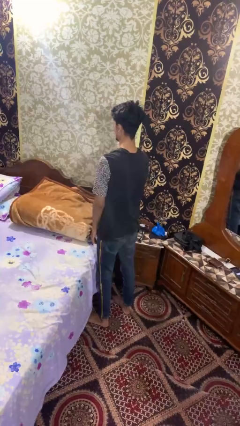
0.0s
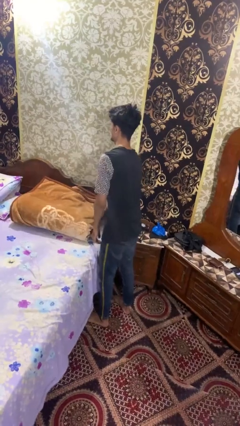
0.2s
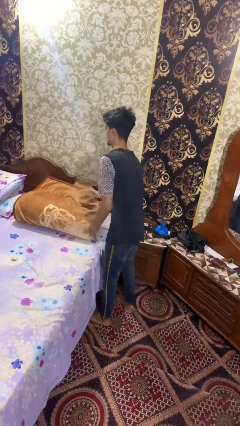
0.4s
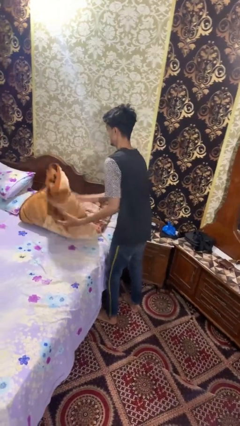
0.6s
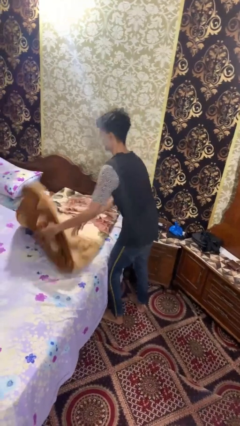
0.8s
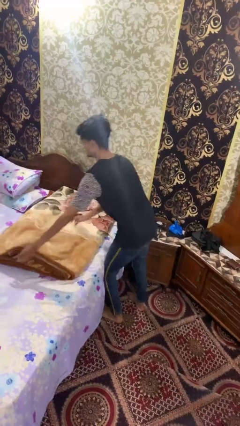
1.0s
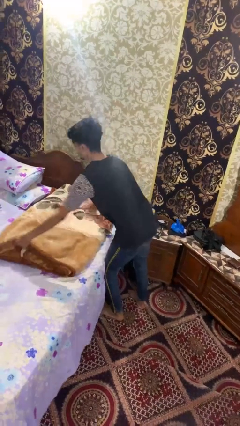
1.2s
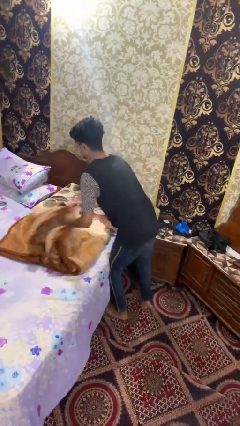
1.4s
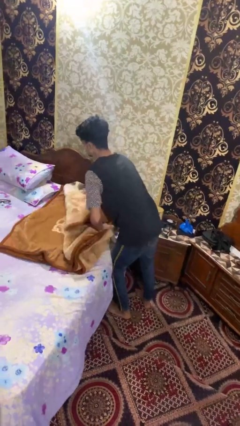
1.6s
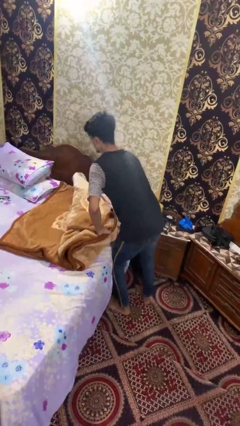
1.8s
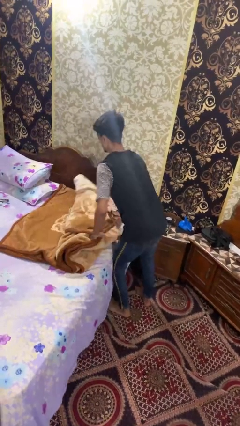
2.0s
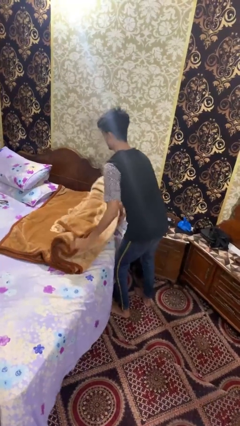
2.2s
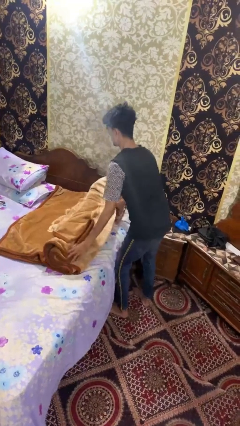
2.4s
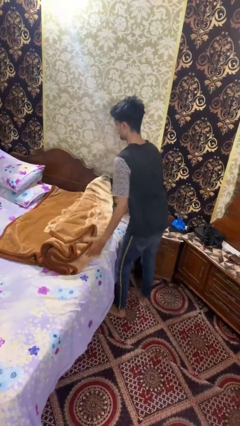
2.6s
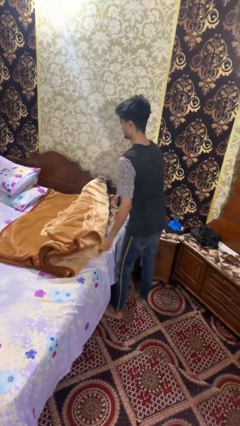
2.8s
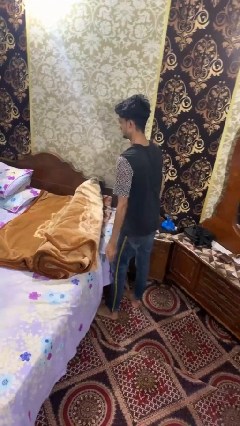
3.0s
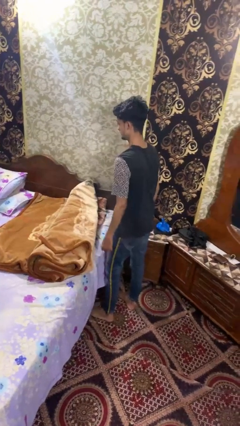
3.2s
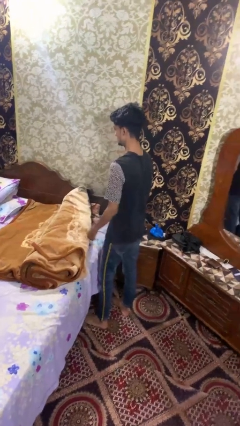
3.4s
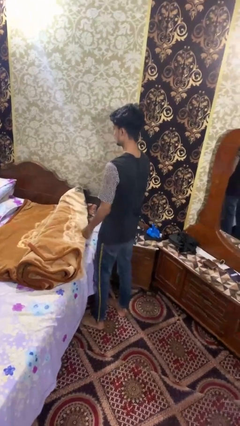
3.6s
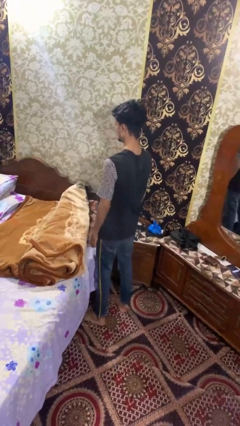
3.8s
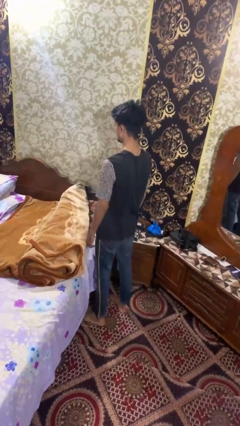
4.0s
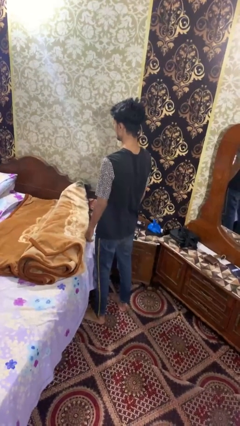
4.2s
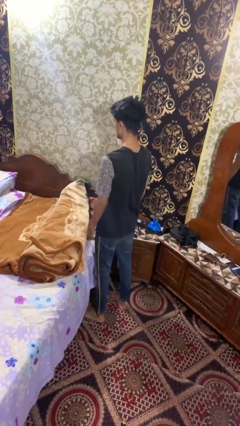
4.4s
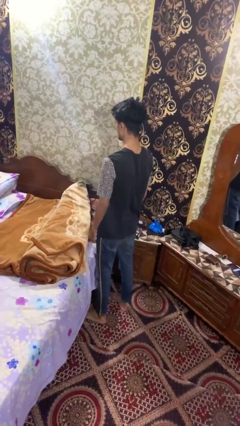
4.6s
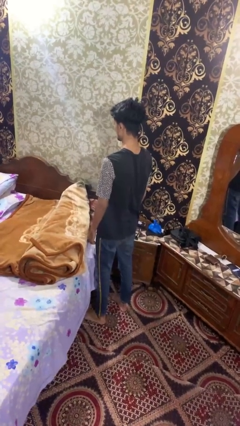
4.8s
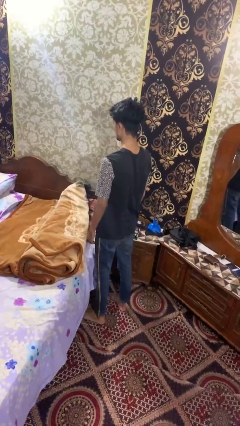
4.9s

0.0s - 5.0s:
person unfolds blanket

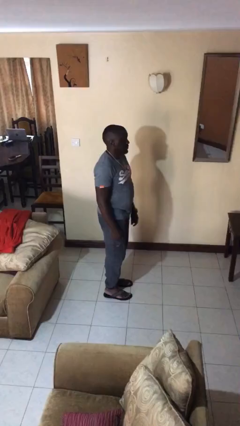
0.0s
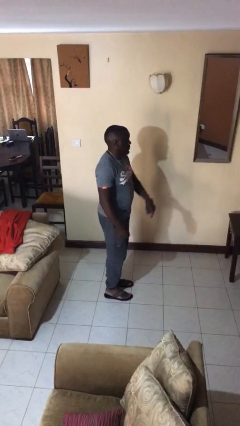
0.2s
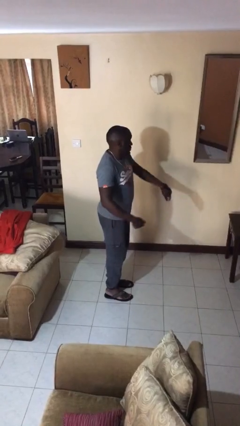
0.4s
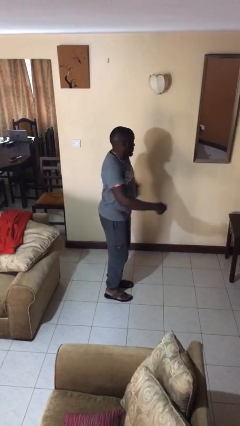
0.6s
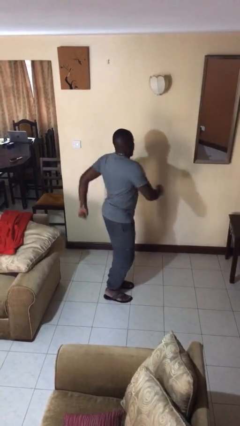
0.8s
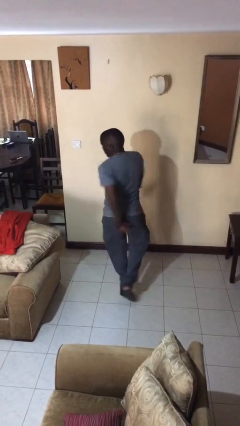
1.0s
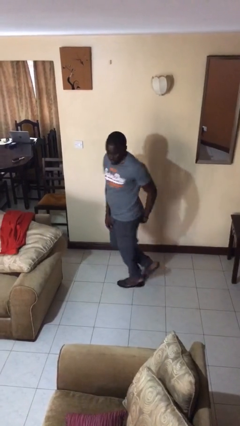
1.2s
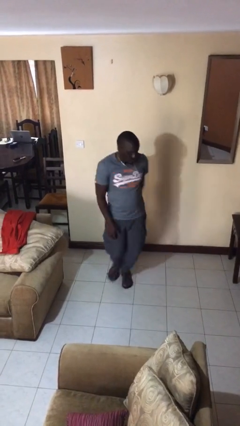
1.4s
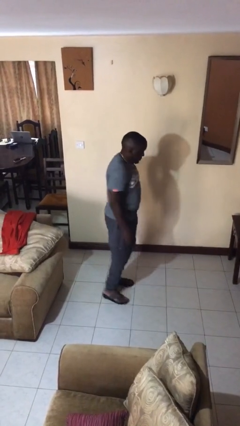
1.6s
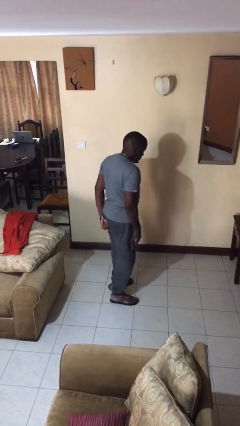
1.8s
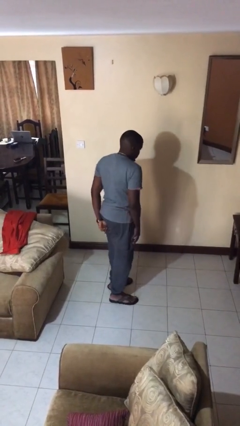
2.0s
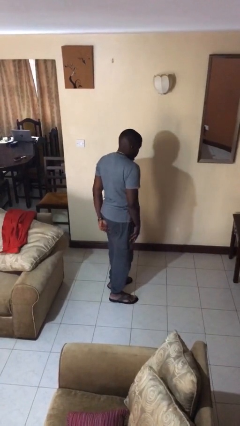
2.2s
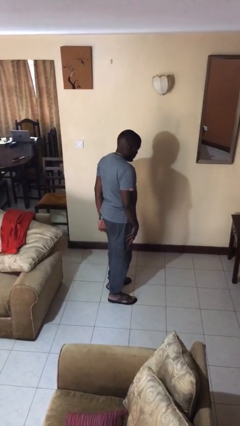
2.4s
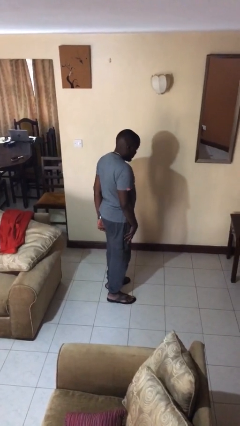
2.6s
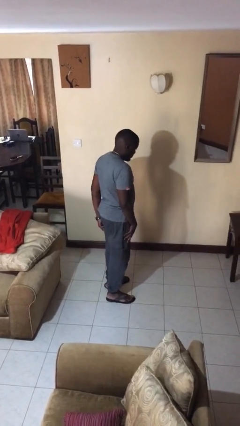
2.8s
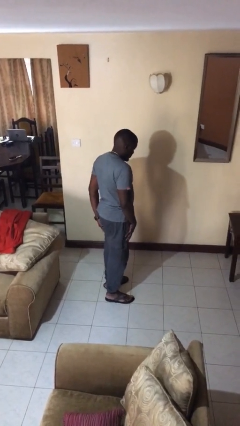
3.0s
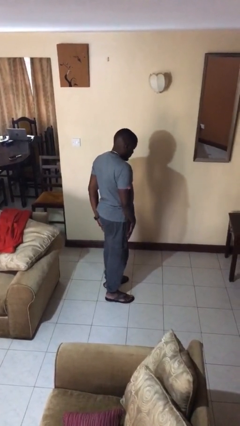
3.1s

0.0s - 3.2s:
person twirls

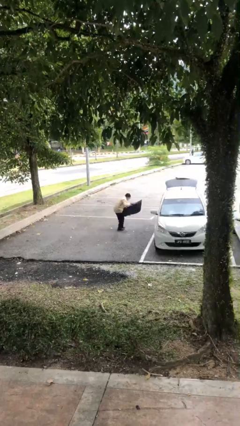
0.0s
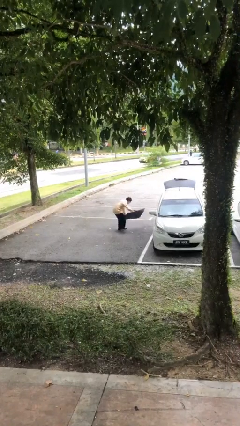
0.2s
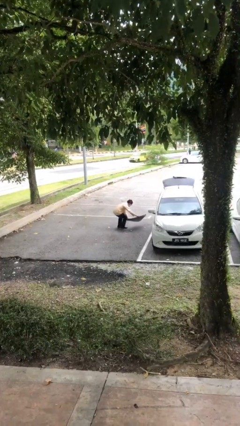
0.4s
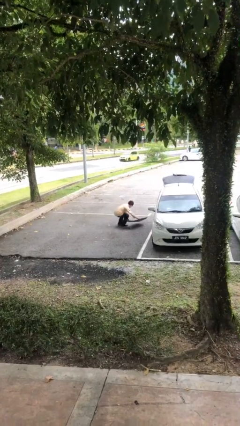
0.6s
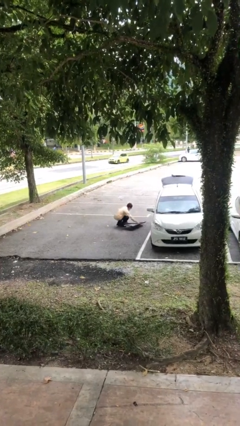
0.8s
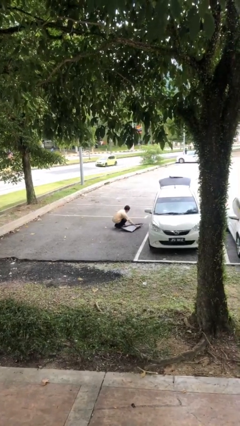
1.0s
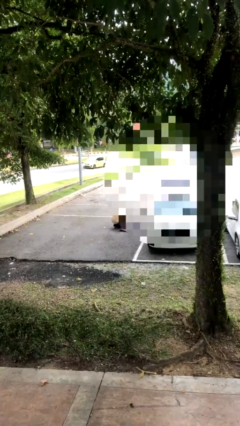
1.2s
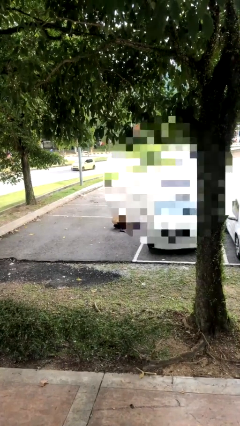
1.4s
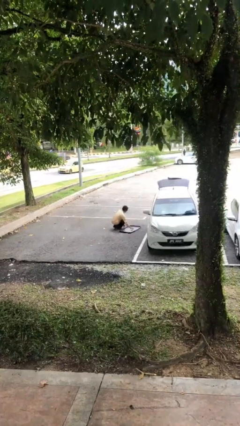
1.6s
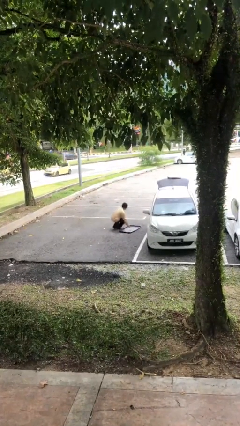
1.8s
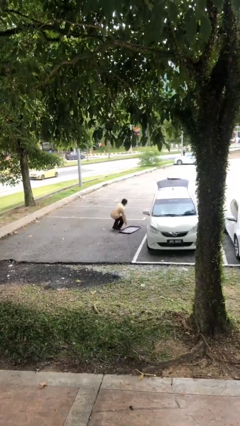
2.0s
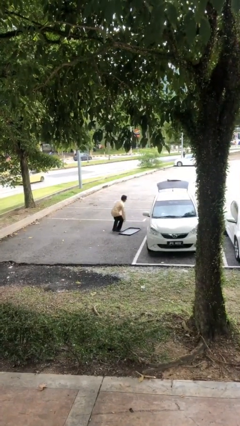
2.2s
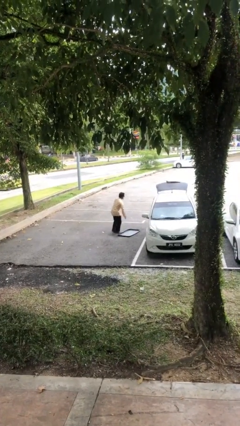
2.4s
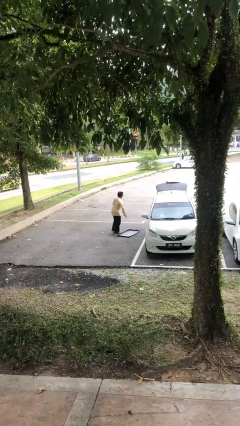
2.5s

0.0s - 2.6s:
person puts down object on floor

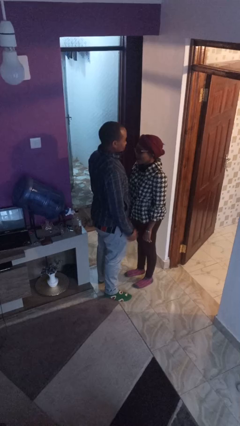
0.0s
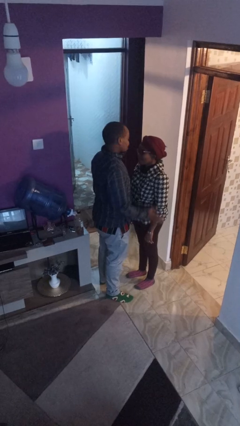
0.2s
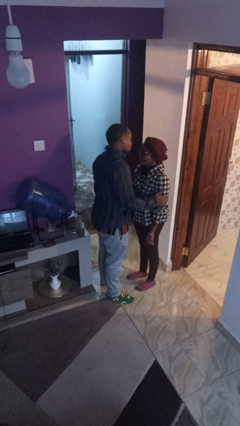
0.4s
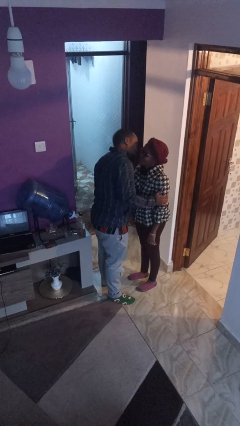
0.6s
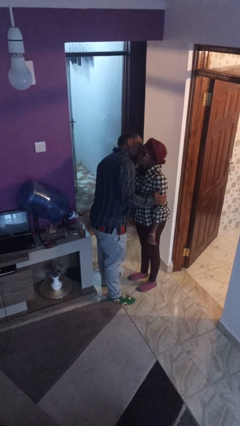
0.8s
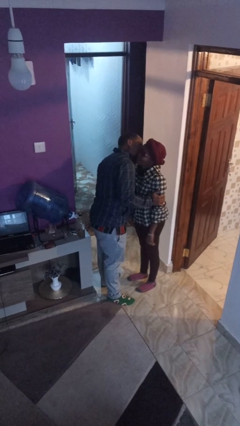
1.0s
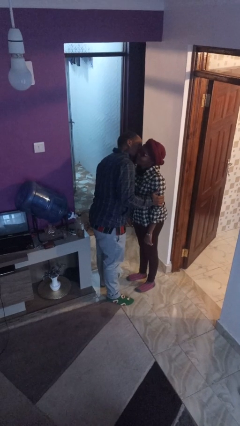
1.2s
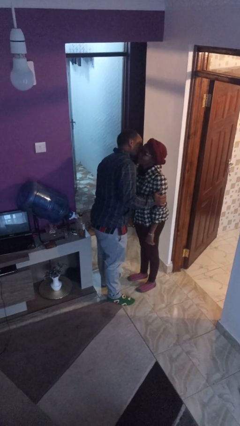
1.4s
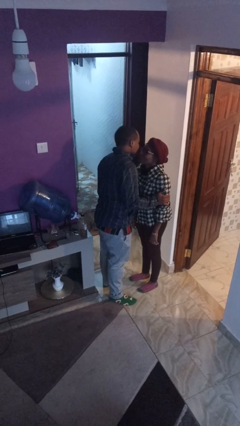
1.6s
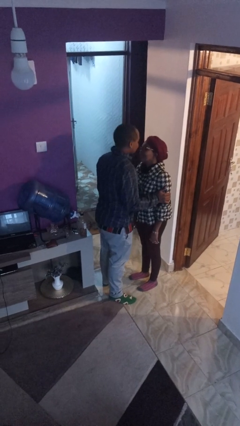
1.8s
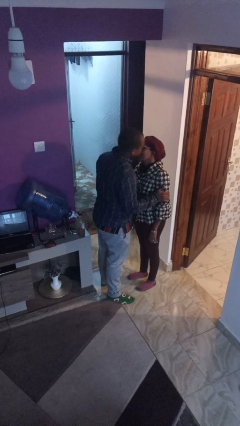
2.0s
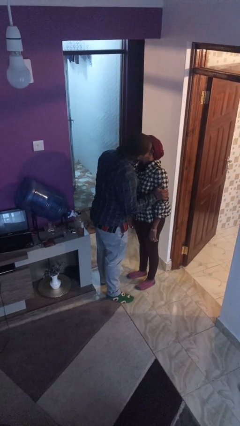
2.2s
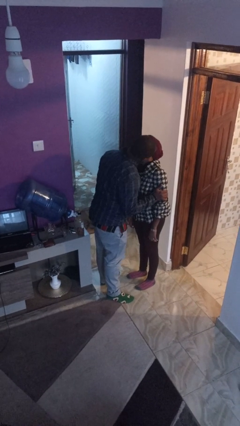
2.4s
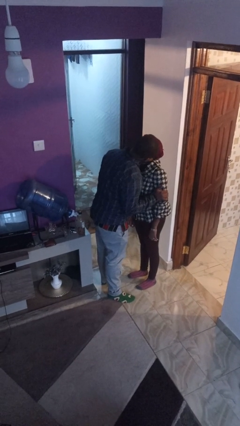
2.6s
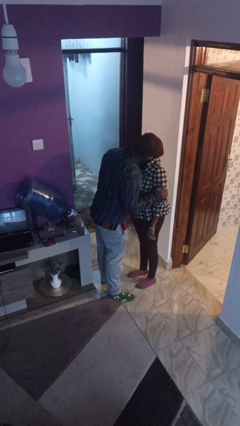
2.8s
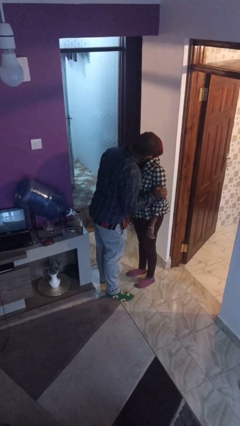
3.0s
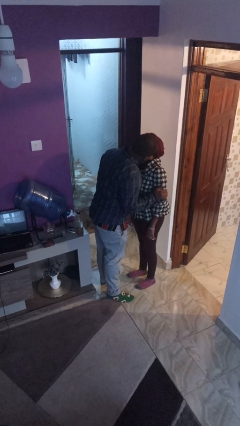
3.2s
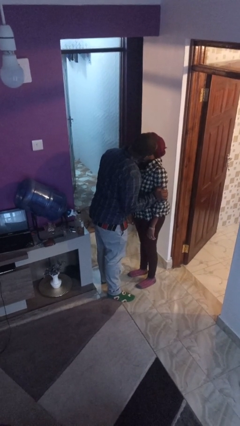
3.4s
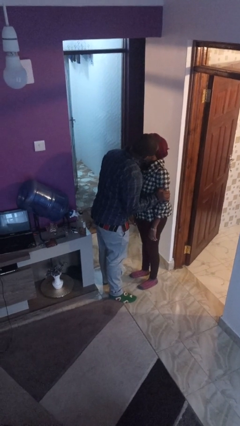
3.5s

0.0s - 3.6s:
person kisses cheek of person

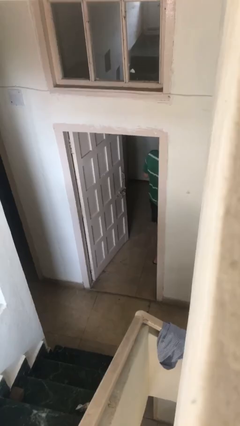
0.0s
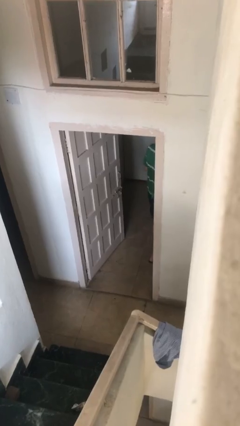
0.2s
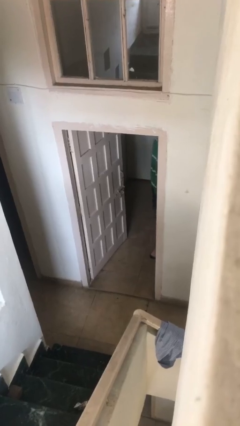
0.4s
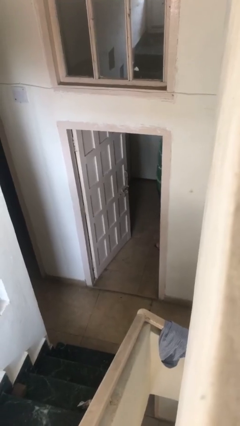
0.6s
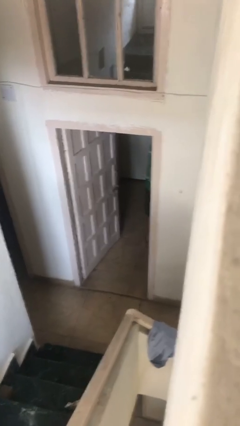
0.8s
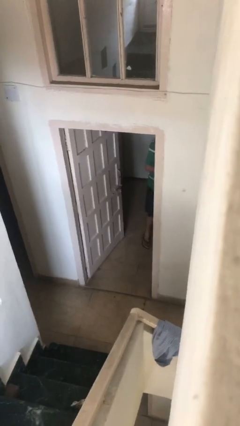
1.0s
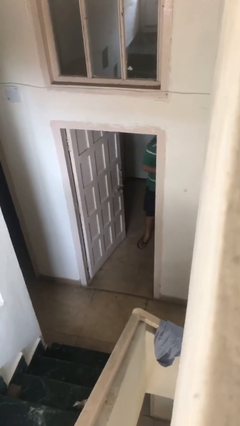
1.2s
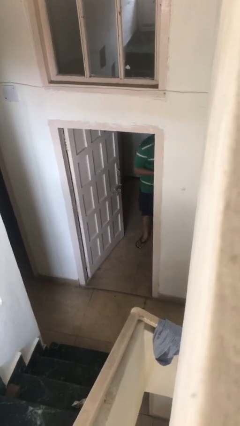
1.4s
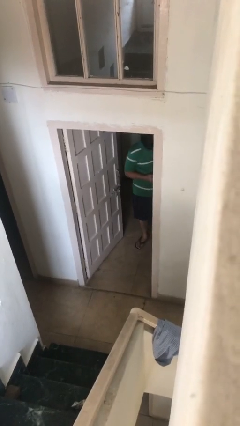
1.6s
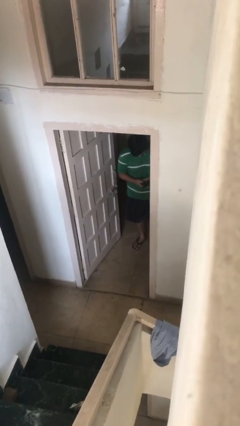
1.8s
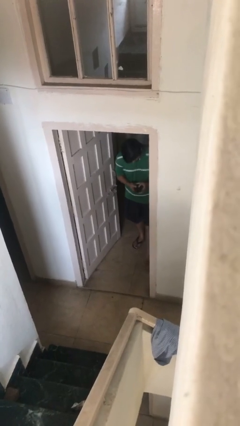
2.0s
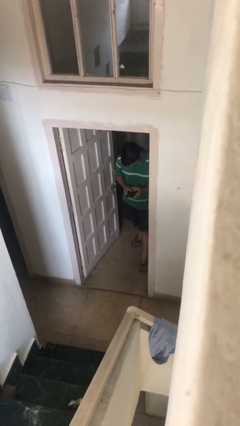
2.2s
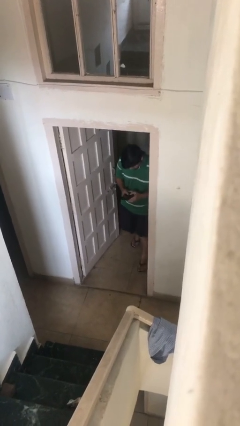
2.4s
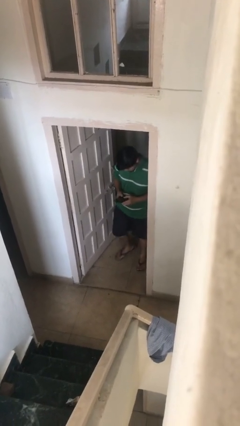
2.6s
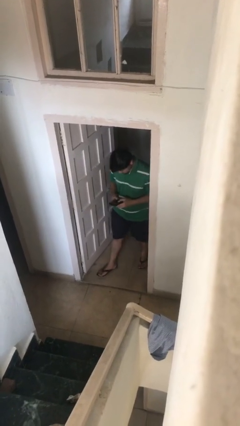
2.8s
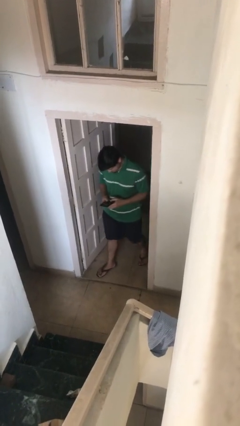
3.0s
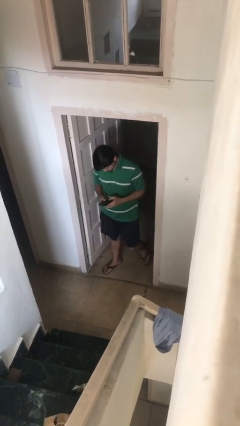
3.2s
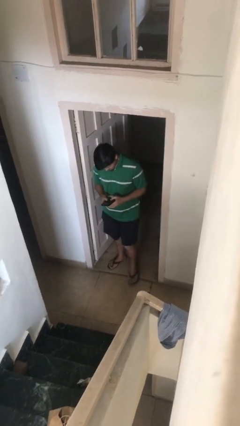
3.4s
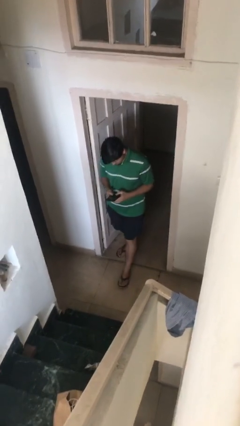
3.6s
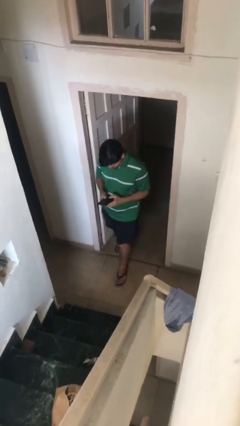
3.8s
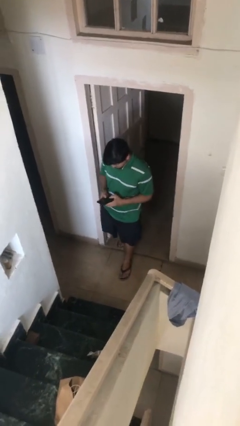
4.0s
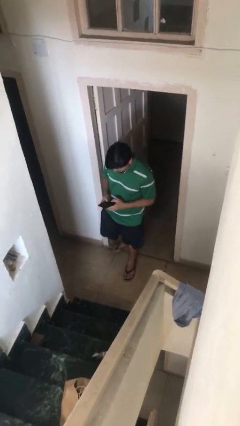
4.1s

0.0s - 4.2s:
person enters scene through structure
